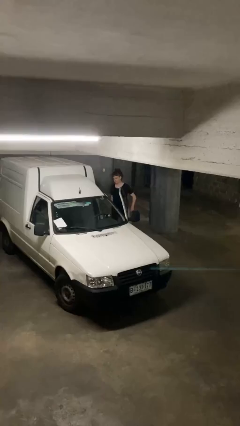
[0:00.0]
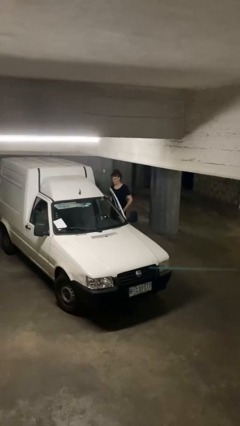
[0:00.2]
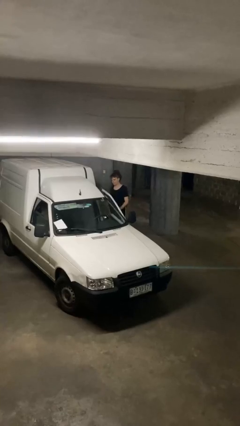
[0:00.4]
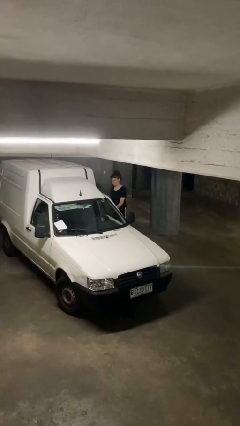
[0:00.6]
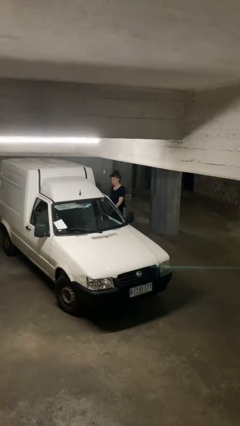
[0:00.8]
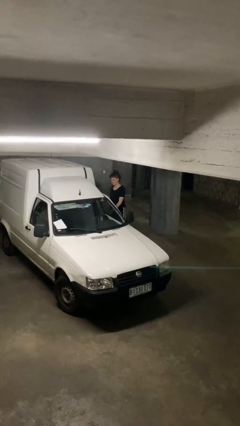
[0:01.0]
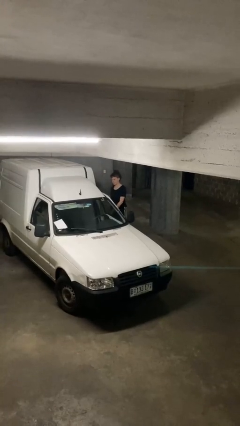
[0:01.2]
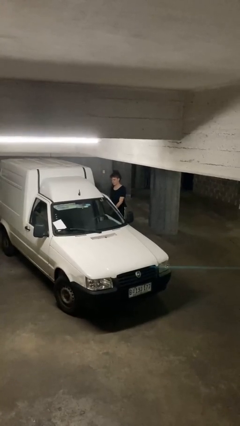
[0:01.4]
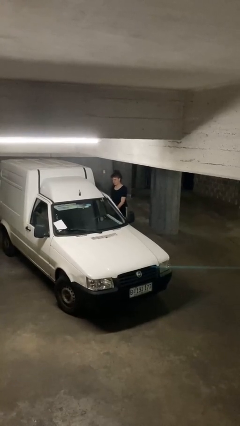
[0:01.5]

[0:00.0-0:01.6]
person closes car door
